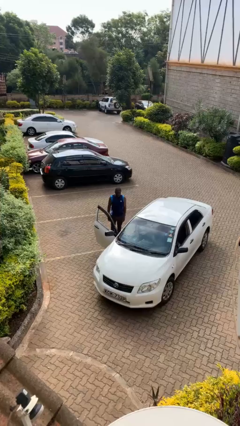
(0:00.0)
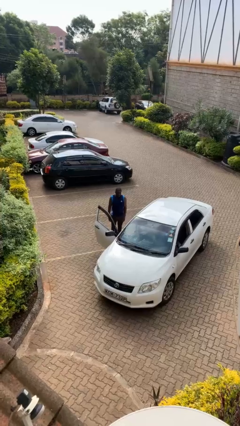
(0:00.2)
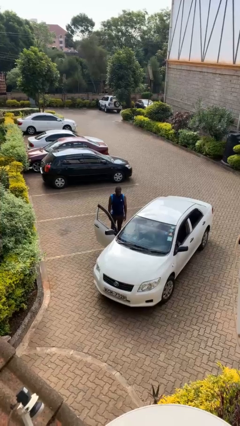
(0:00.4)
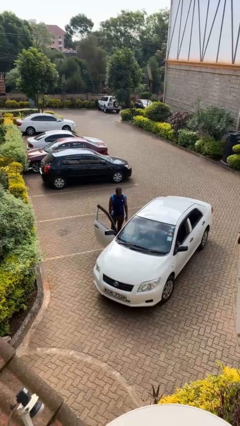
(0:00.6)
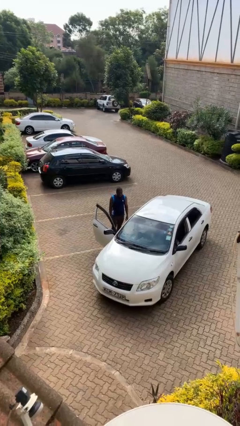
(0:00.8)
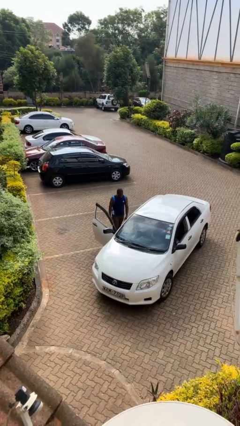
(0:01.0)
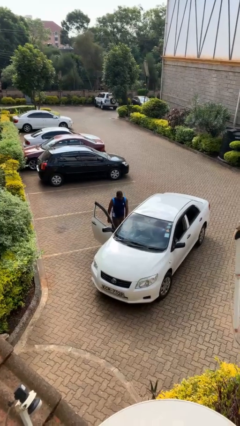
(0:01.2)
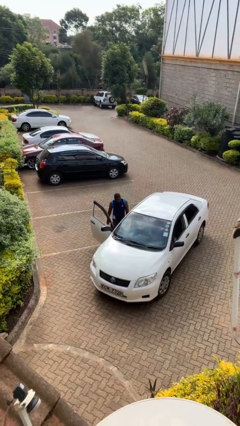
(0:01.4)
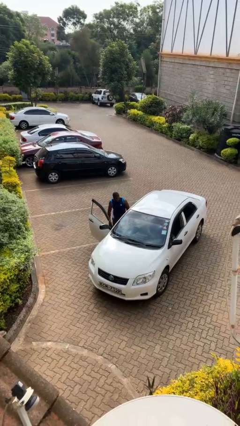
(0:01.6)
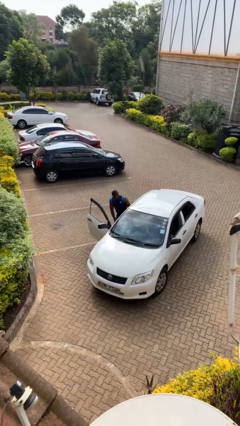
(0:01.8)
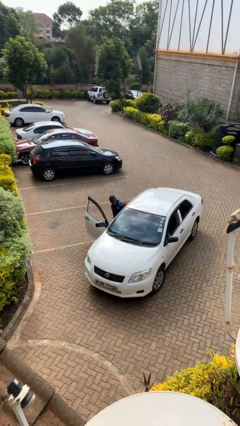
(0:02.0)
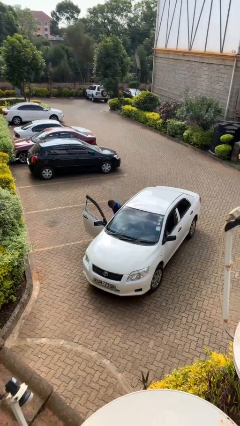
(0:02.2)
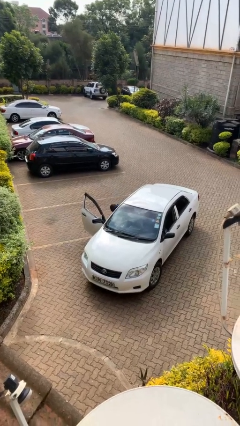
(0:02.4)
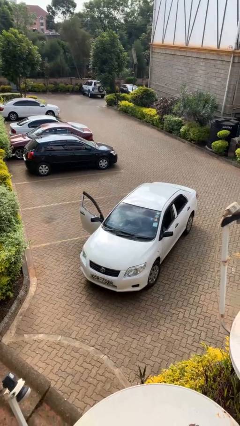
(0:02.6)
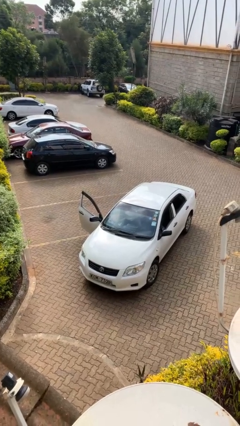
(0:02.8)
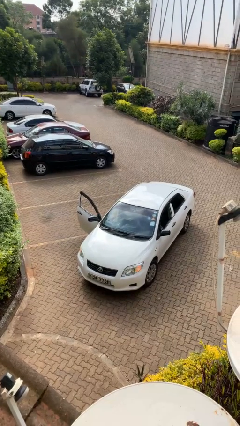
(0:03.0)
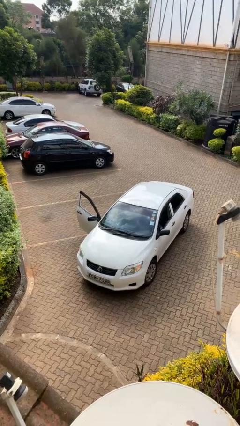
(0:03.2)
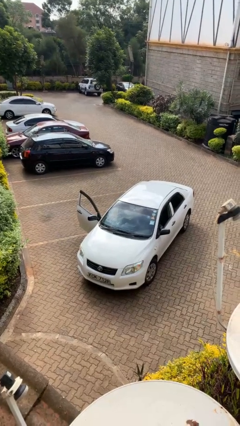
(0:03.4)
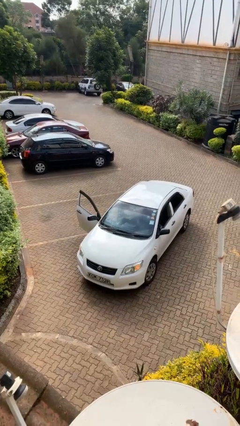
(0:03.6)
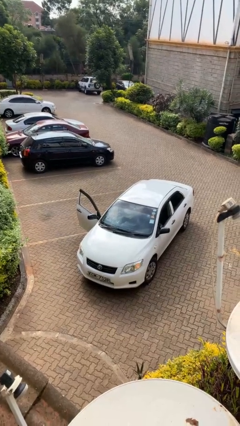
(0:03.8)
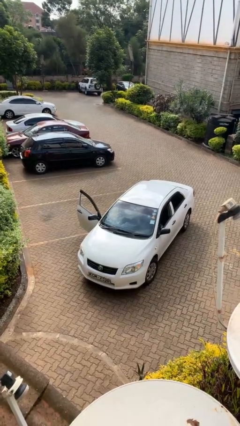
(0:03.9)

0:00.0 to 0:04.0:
person enters car

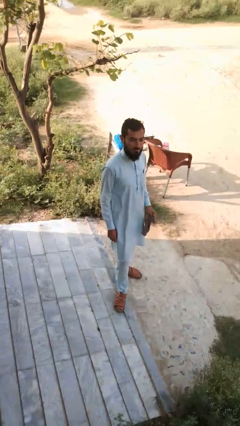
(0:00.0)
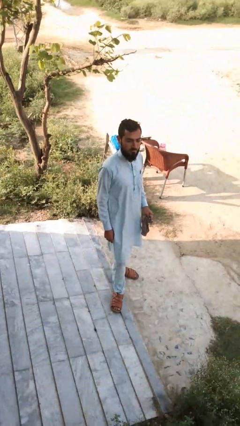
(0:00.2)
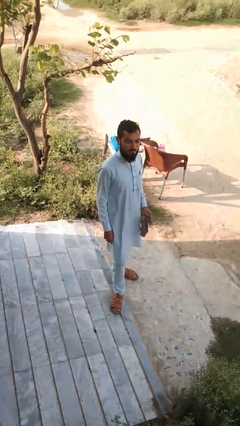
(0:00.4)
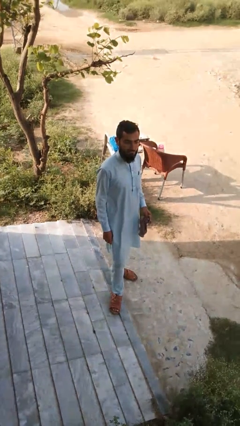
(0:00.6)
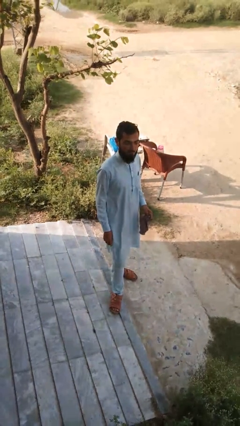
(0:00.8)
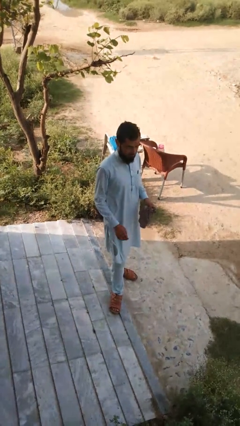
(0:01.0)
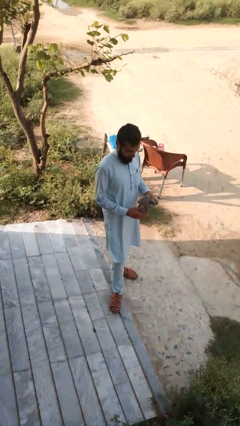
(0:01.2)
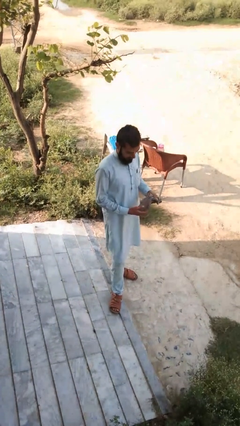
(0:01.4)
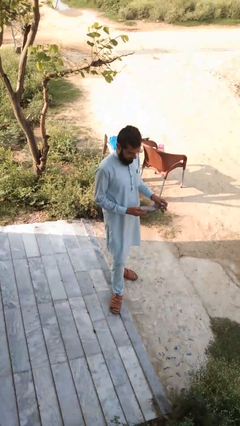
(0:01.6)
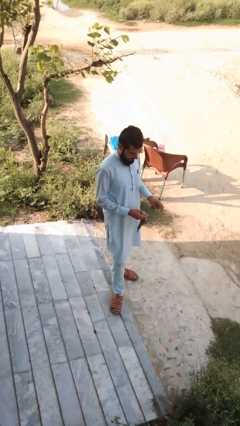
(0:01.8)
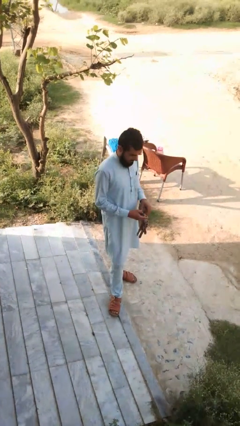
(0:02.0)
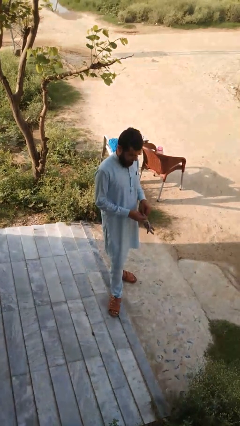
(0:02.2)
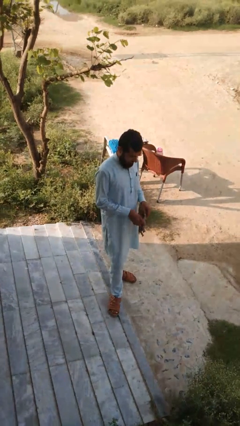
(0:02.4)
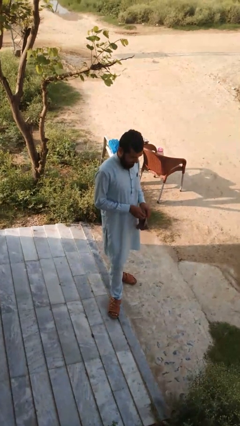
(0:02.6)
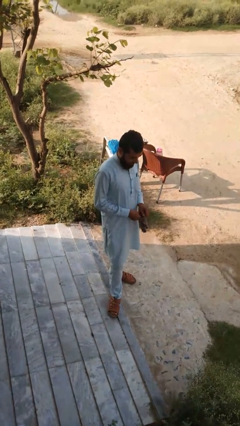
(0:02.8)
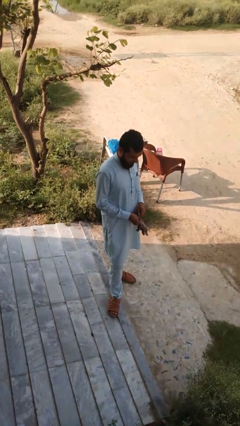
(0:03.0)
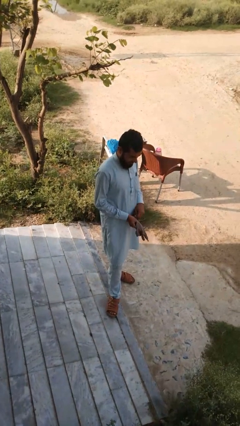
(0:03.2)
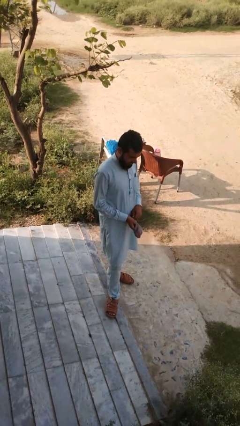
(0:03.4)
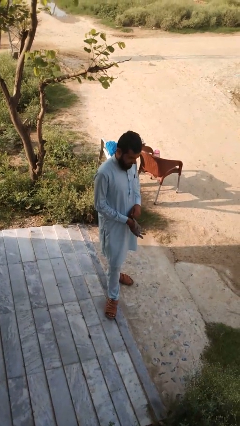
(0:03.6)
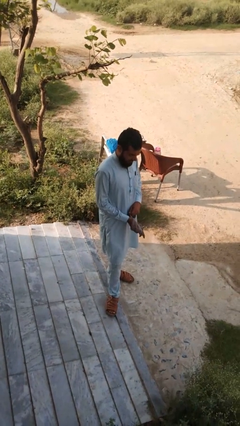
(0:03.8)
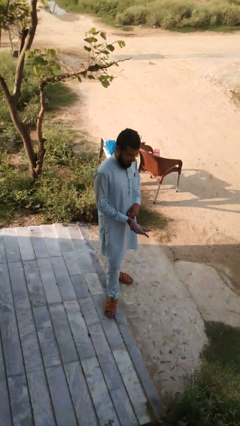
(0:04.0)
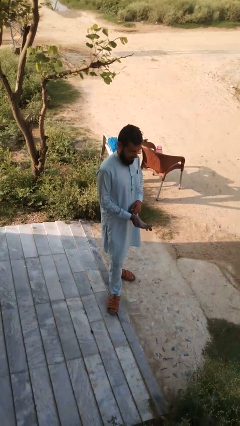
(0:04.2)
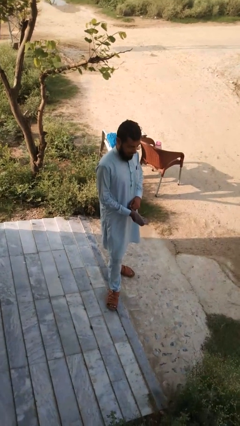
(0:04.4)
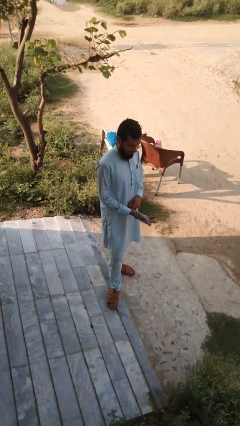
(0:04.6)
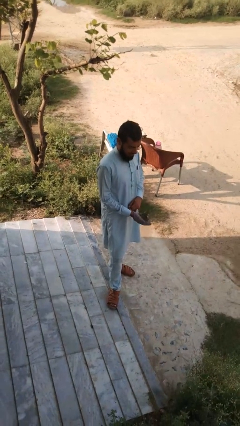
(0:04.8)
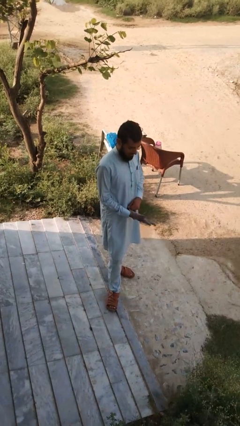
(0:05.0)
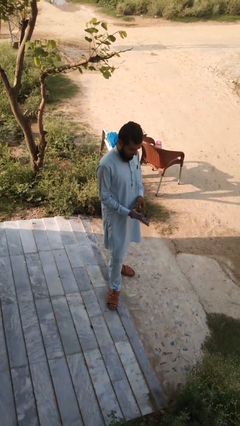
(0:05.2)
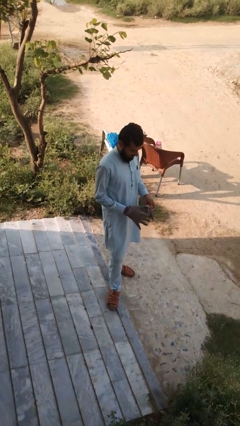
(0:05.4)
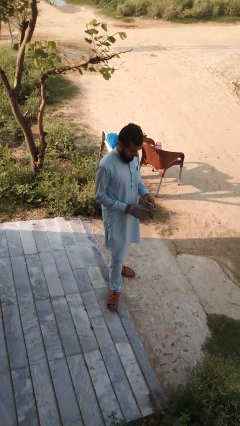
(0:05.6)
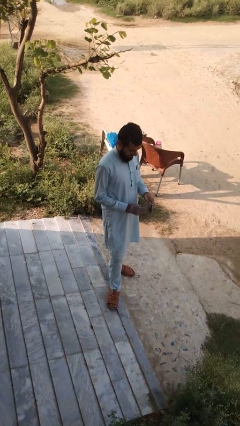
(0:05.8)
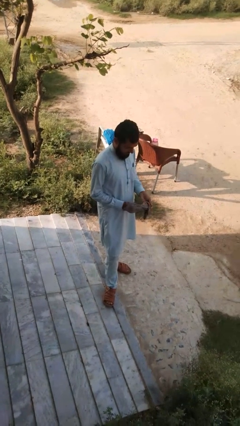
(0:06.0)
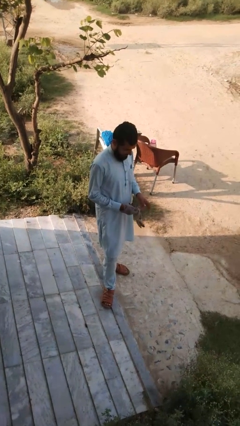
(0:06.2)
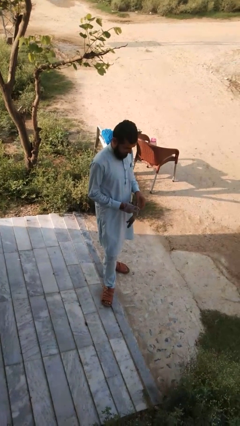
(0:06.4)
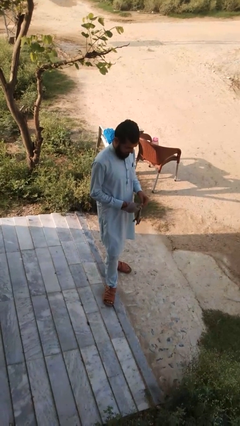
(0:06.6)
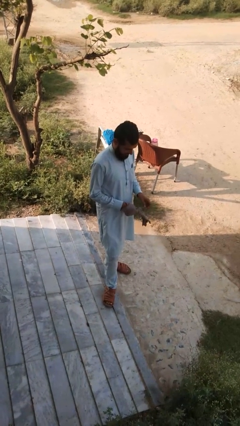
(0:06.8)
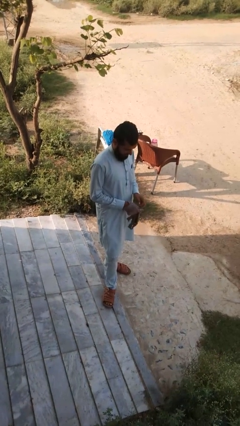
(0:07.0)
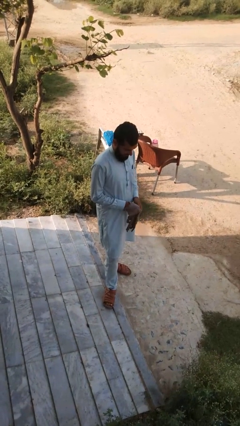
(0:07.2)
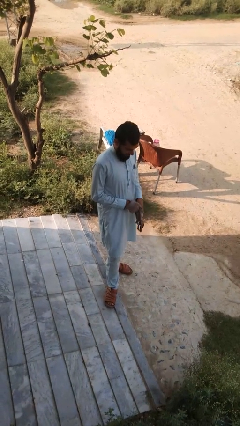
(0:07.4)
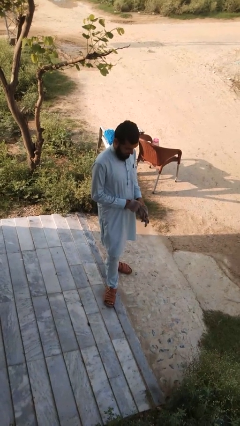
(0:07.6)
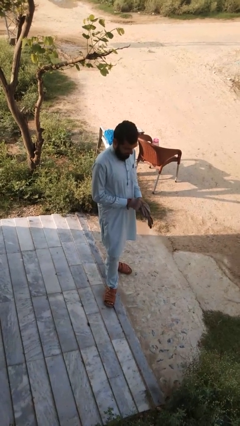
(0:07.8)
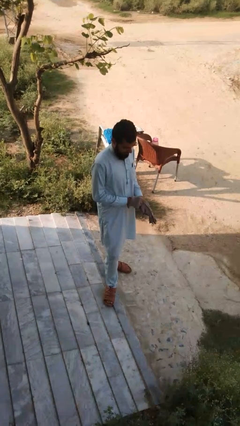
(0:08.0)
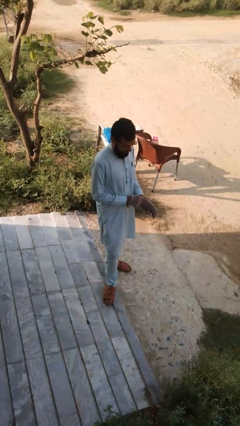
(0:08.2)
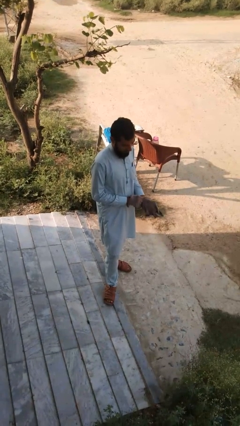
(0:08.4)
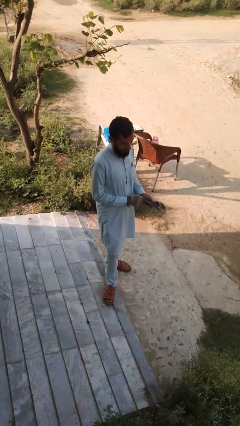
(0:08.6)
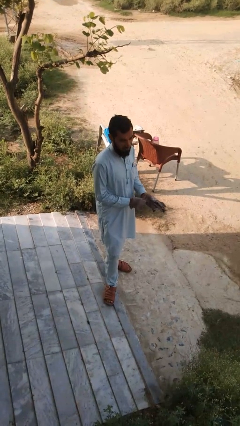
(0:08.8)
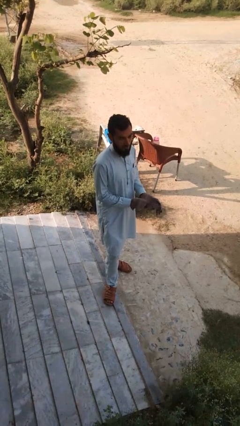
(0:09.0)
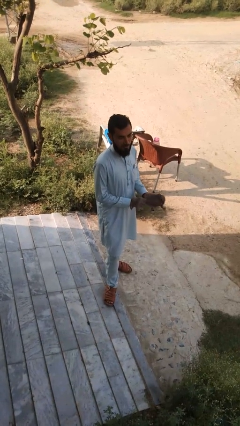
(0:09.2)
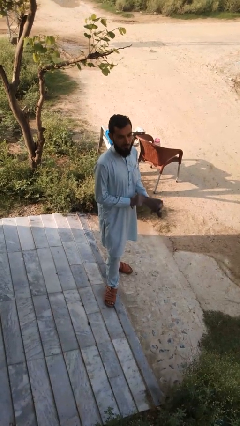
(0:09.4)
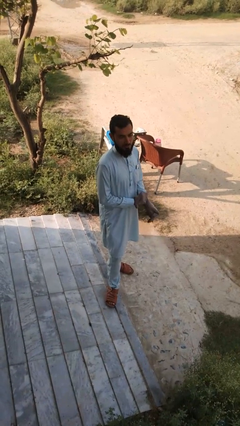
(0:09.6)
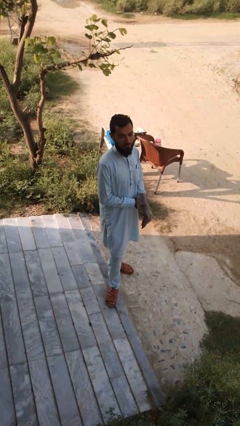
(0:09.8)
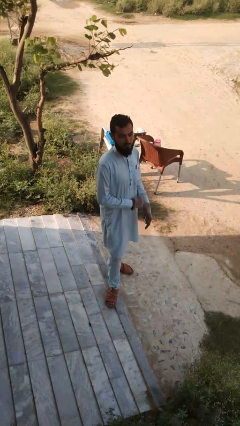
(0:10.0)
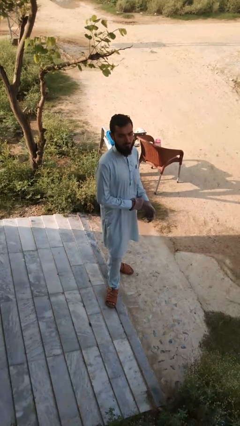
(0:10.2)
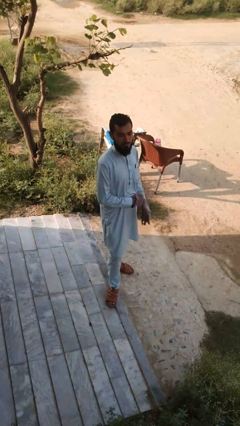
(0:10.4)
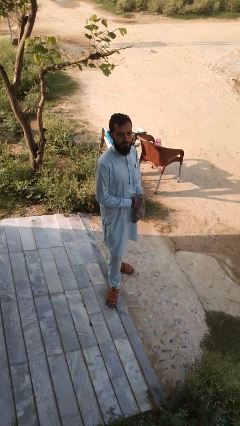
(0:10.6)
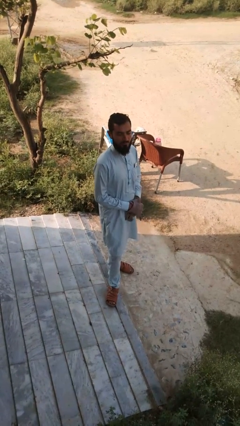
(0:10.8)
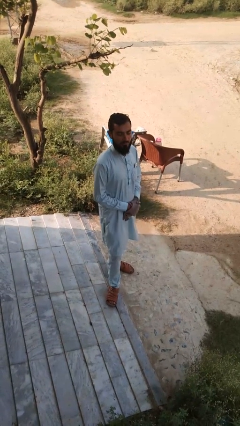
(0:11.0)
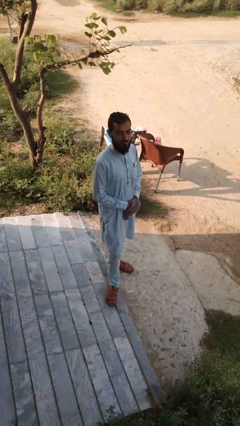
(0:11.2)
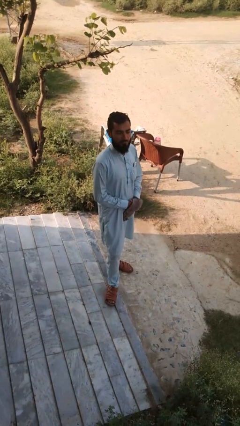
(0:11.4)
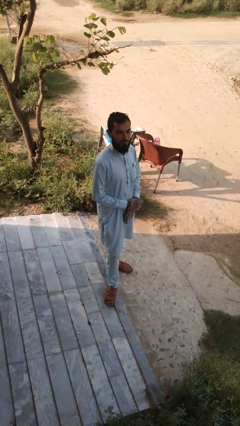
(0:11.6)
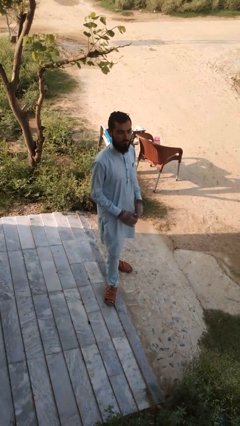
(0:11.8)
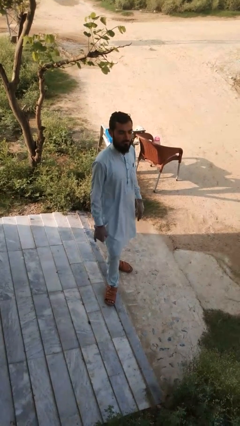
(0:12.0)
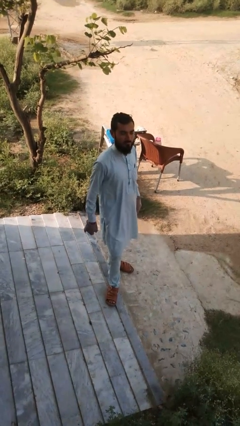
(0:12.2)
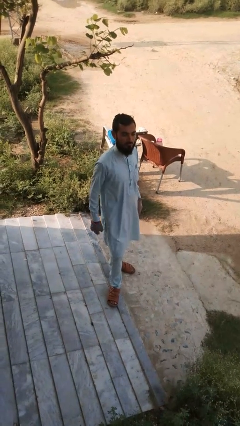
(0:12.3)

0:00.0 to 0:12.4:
person puts on gloves

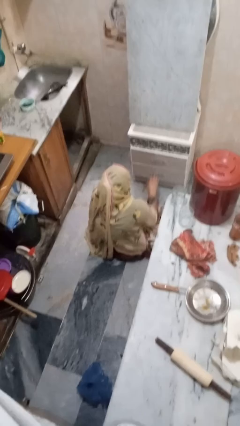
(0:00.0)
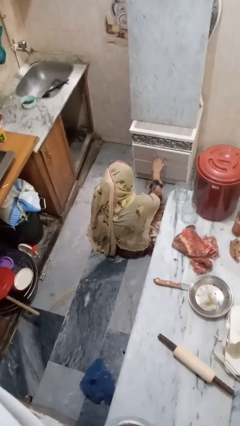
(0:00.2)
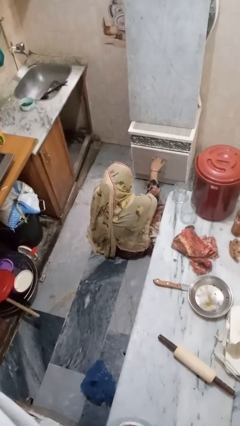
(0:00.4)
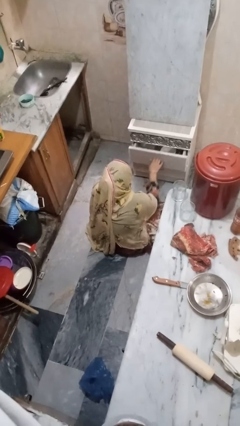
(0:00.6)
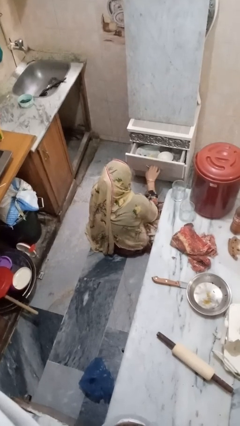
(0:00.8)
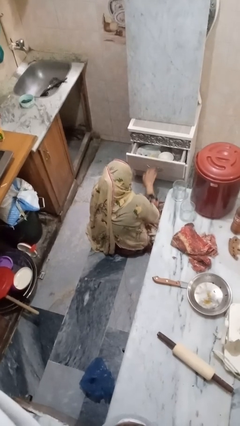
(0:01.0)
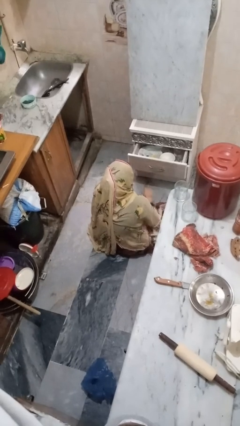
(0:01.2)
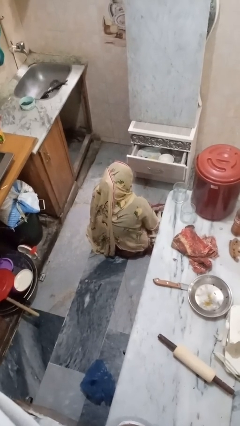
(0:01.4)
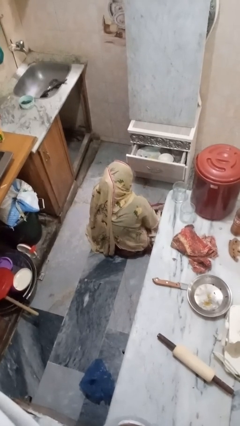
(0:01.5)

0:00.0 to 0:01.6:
person opens kitchen drawer
